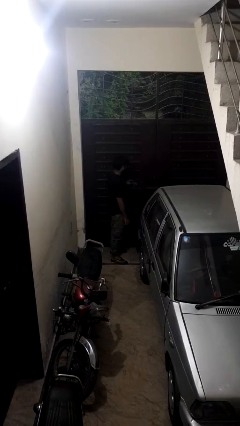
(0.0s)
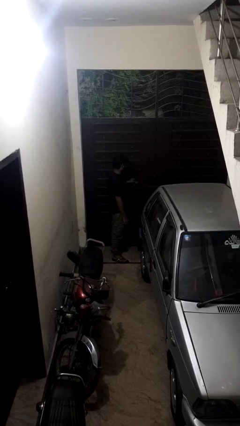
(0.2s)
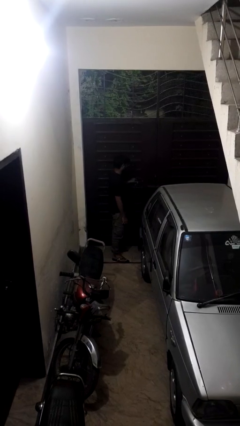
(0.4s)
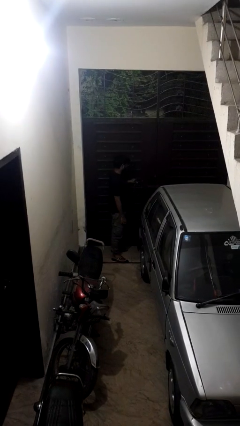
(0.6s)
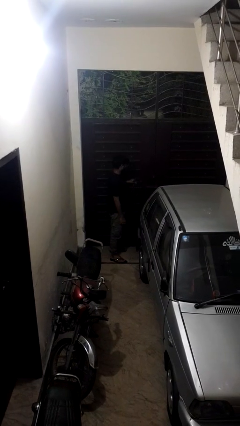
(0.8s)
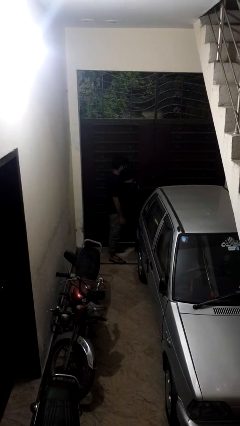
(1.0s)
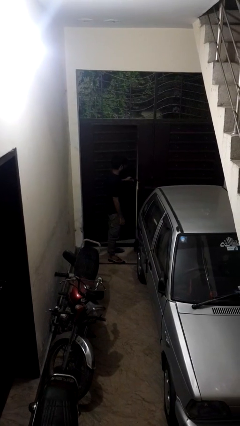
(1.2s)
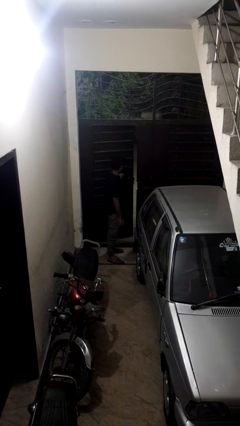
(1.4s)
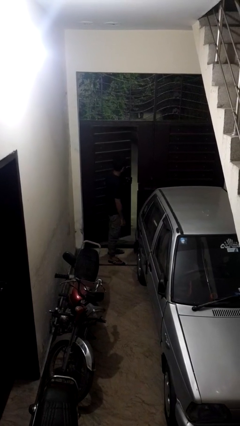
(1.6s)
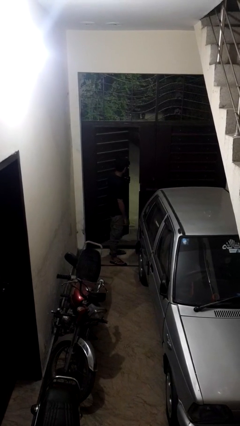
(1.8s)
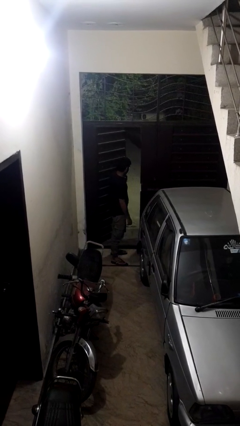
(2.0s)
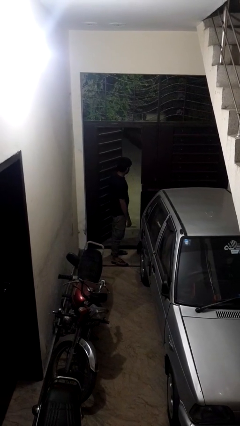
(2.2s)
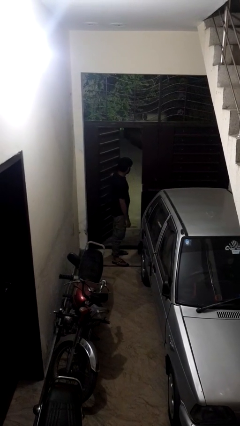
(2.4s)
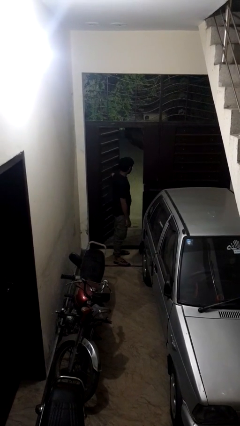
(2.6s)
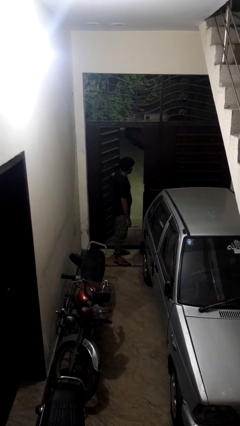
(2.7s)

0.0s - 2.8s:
person opens gate

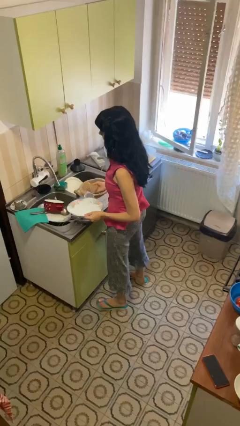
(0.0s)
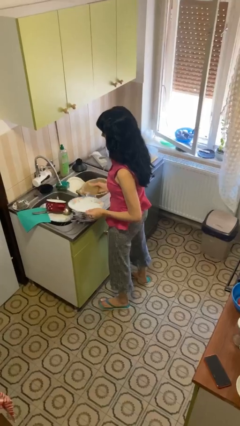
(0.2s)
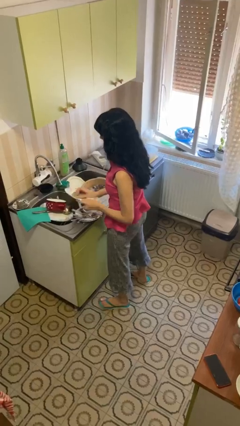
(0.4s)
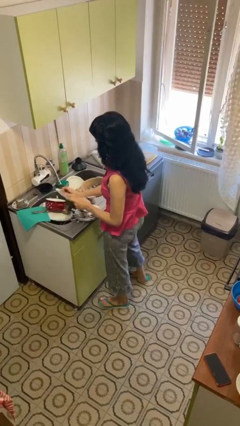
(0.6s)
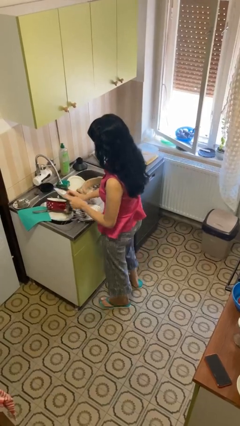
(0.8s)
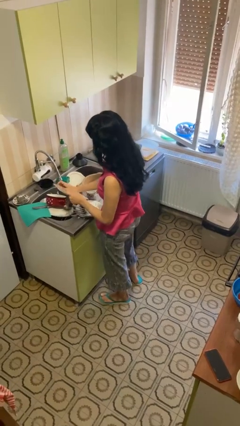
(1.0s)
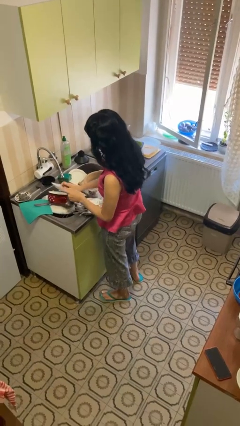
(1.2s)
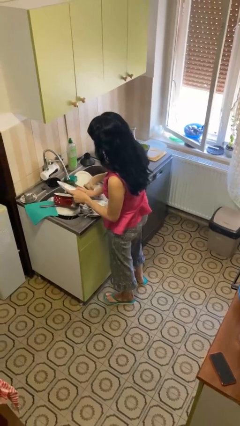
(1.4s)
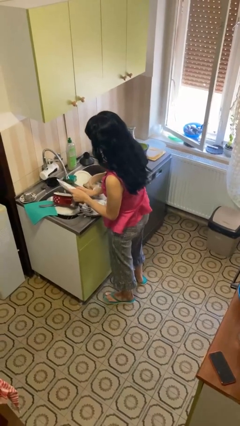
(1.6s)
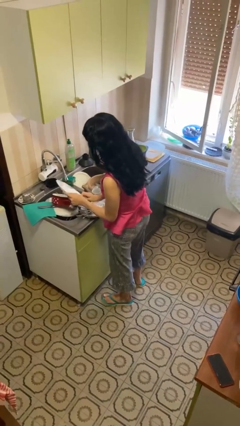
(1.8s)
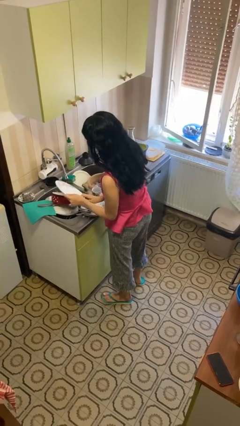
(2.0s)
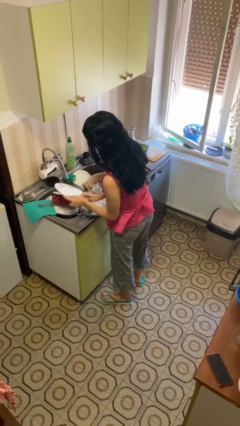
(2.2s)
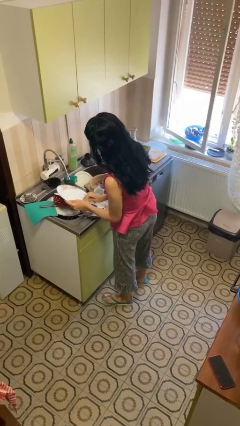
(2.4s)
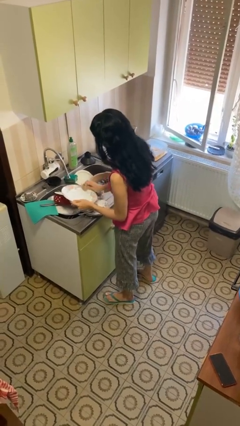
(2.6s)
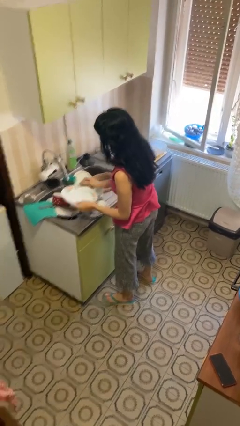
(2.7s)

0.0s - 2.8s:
person washes dish

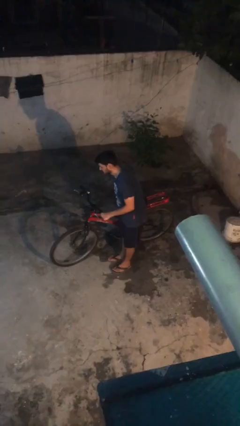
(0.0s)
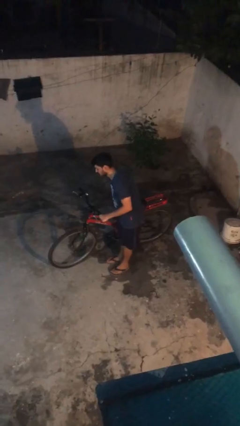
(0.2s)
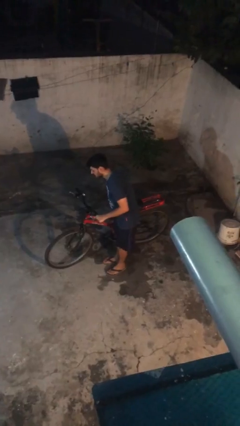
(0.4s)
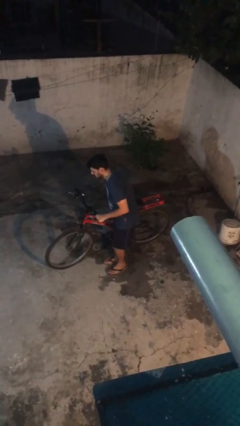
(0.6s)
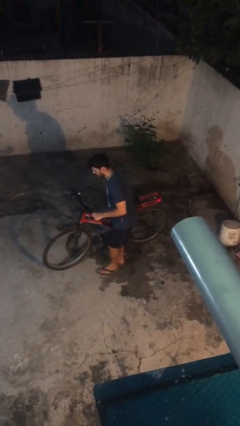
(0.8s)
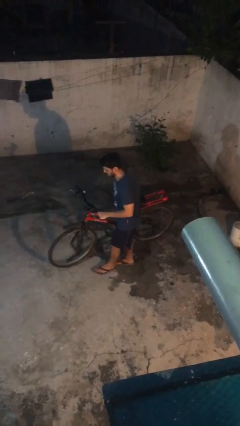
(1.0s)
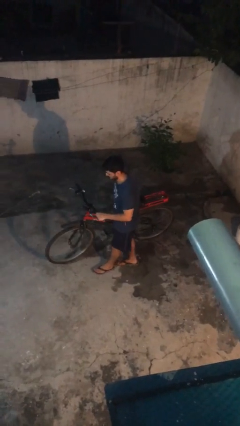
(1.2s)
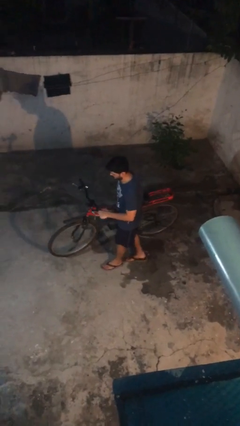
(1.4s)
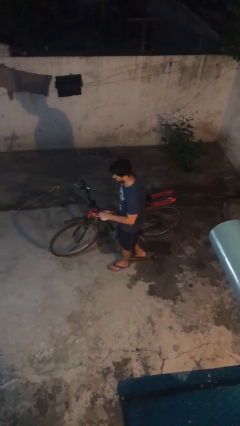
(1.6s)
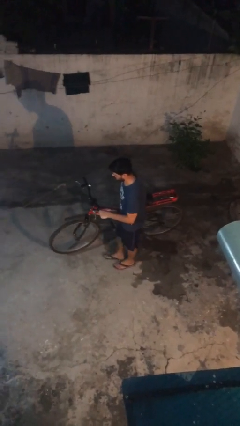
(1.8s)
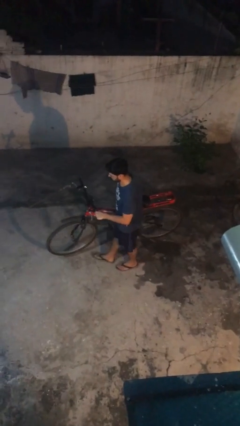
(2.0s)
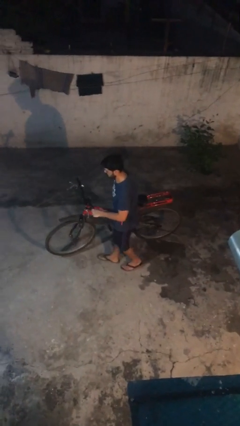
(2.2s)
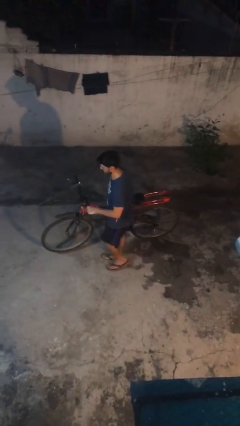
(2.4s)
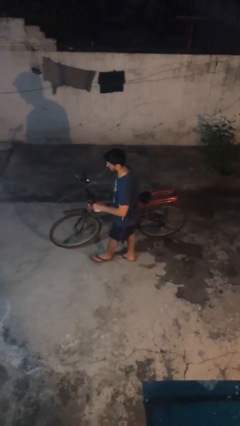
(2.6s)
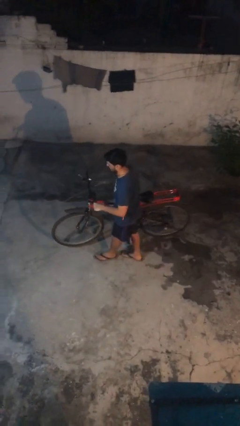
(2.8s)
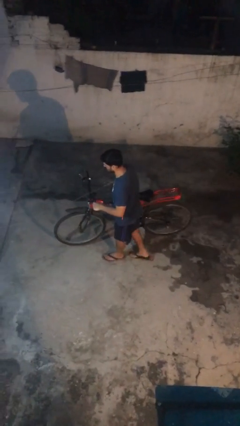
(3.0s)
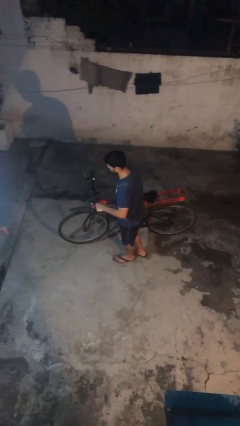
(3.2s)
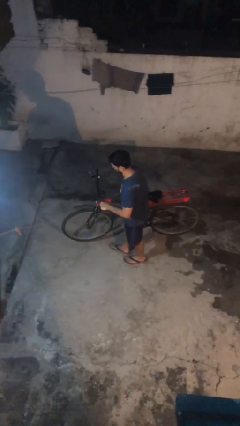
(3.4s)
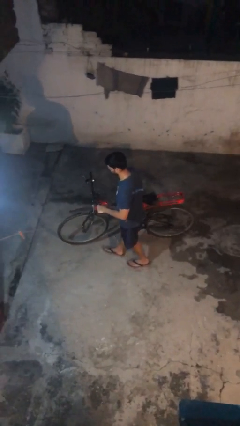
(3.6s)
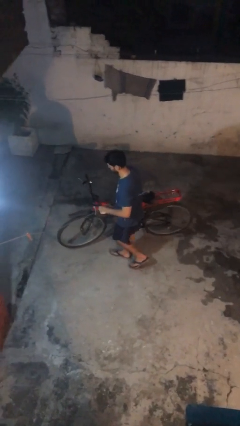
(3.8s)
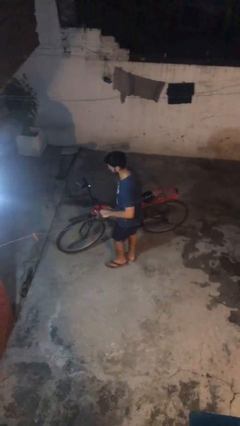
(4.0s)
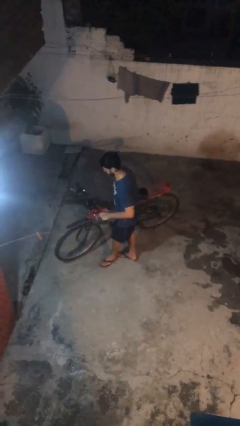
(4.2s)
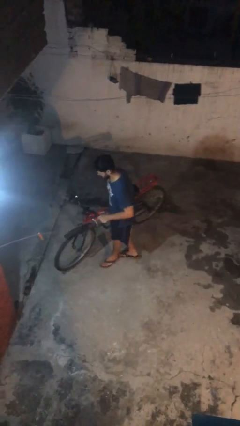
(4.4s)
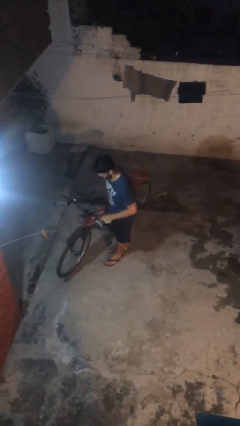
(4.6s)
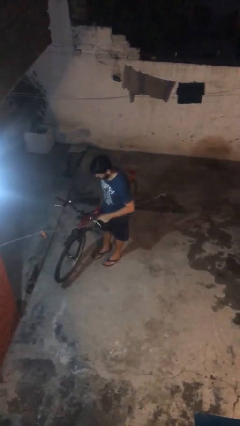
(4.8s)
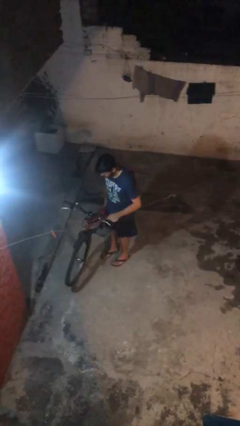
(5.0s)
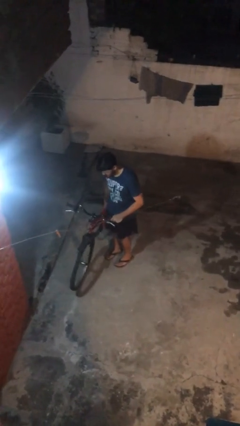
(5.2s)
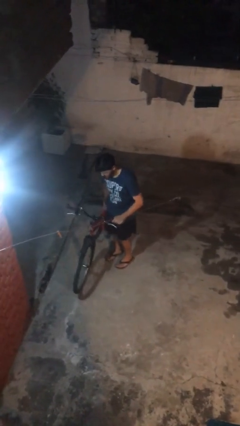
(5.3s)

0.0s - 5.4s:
person carries bicycle

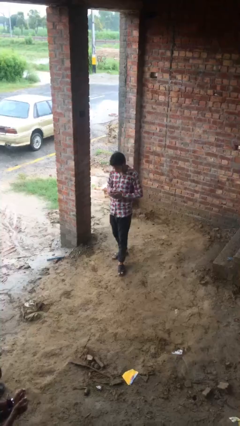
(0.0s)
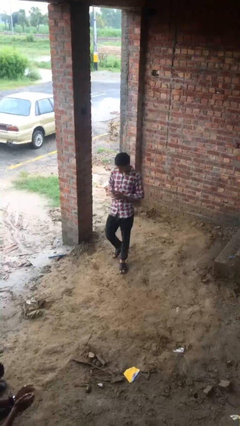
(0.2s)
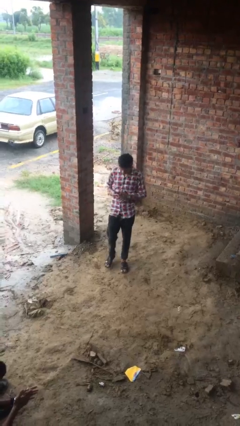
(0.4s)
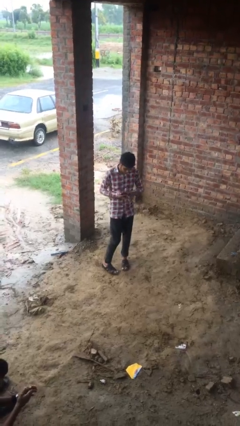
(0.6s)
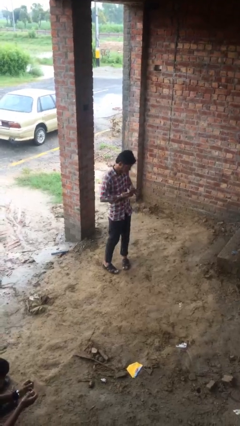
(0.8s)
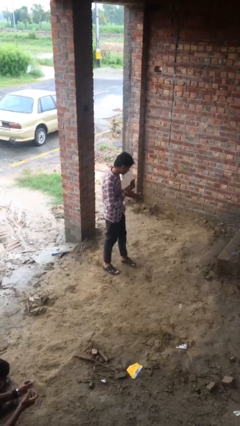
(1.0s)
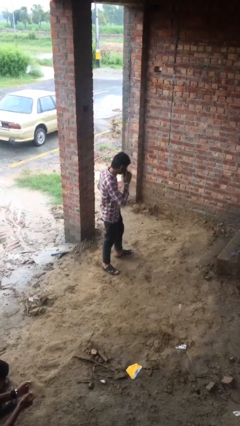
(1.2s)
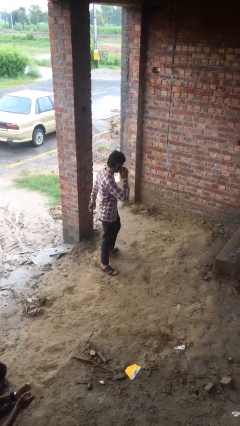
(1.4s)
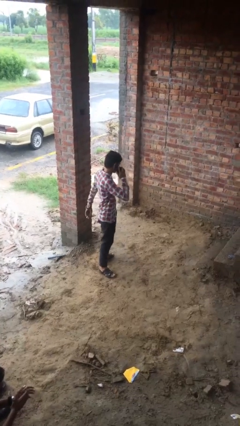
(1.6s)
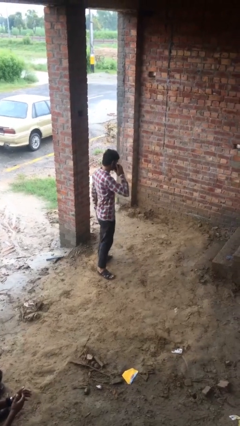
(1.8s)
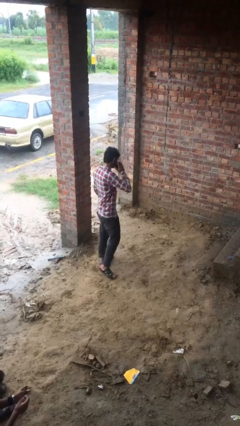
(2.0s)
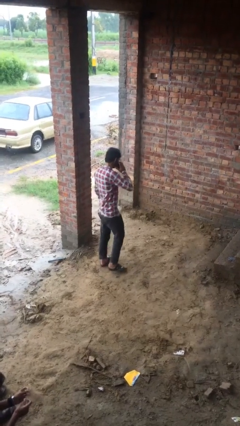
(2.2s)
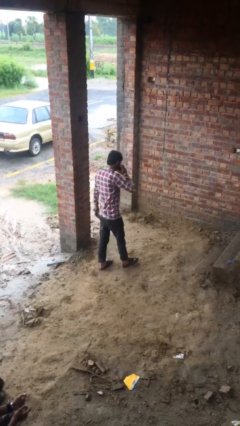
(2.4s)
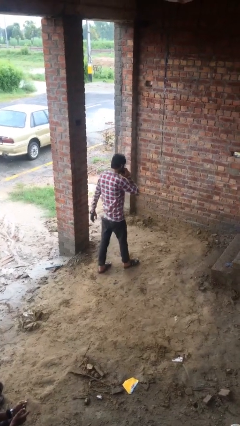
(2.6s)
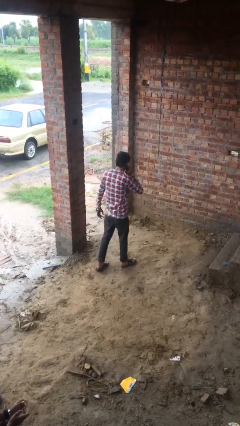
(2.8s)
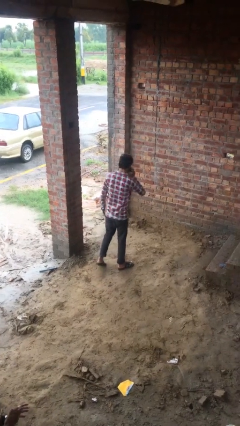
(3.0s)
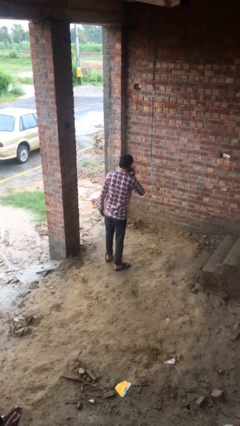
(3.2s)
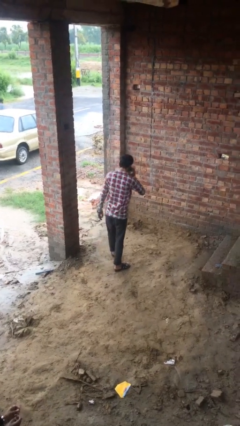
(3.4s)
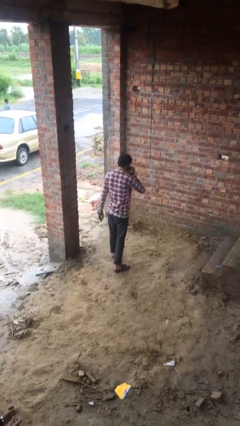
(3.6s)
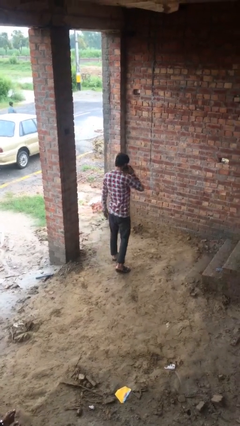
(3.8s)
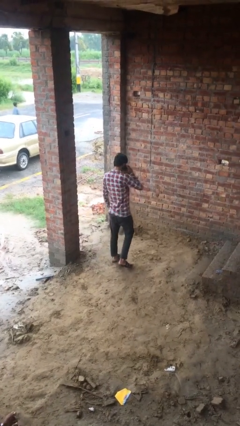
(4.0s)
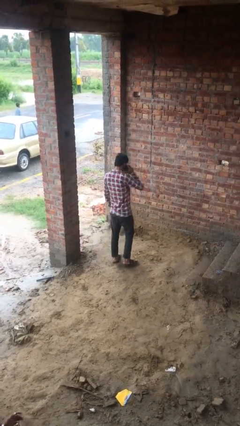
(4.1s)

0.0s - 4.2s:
person talks on phone

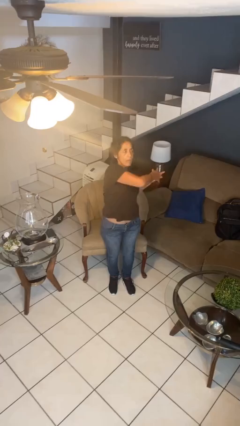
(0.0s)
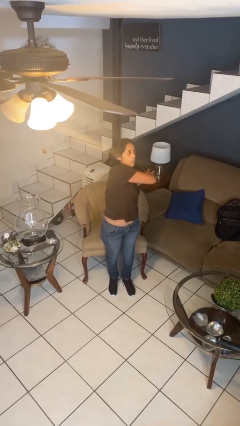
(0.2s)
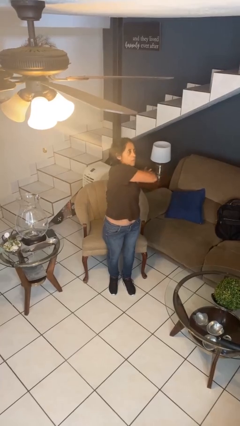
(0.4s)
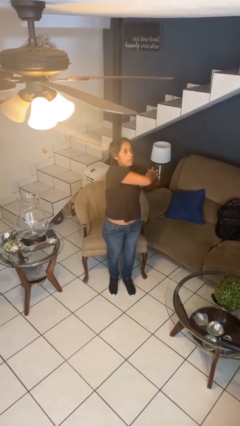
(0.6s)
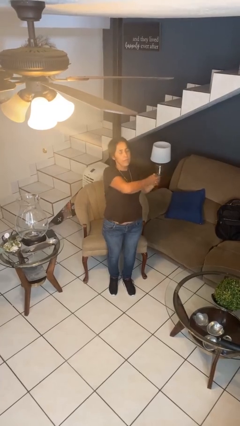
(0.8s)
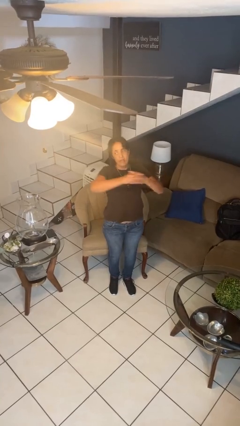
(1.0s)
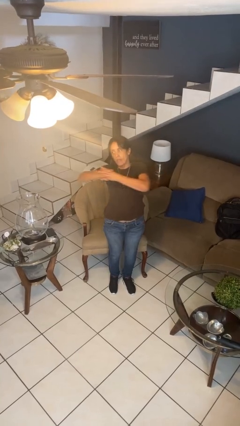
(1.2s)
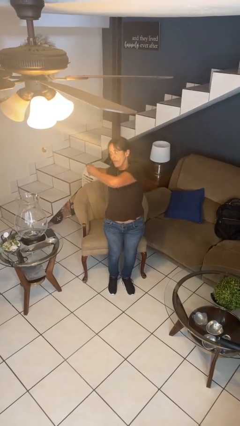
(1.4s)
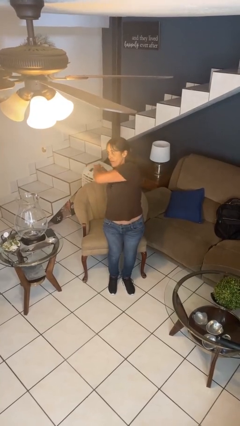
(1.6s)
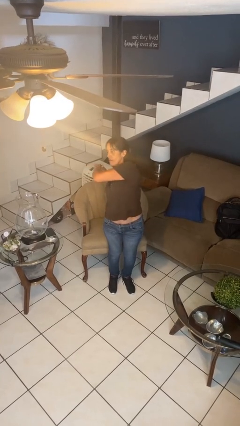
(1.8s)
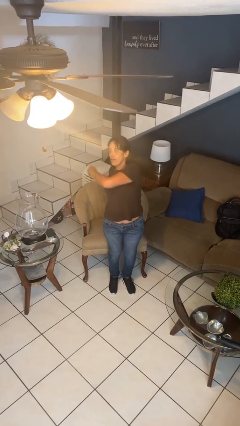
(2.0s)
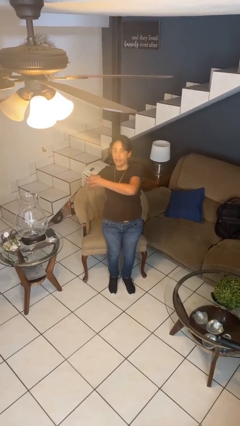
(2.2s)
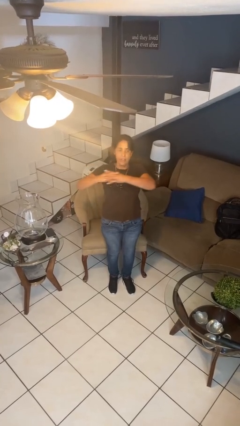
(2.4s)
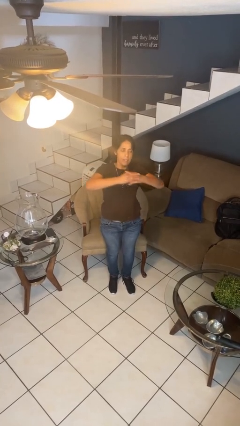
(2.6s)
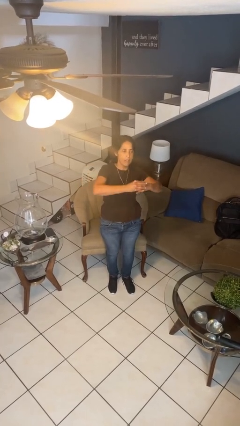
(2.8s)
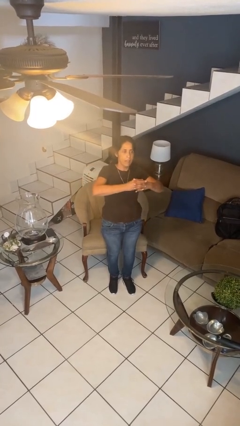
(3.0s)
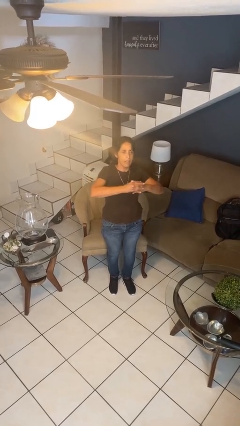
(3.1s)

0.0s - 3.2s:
person stretches arms to side
